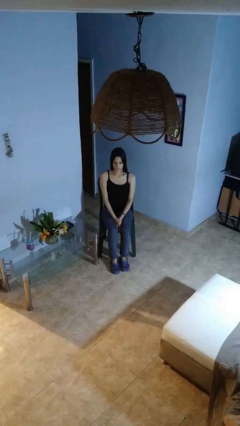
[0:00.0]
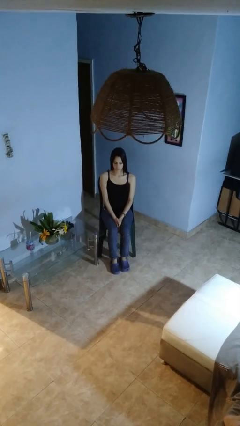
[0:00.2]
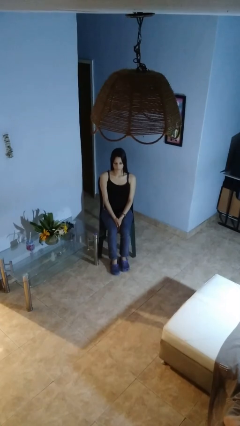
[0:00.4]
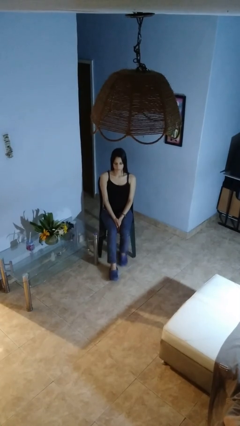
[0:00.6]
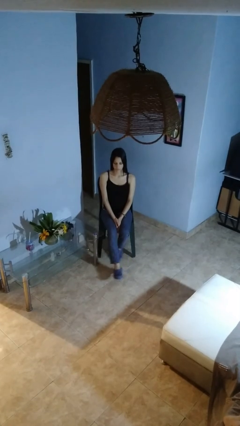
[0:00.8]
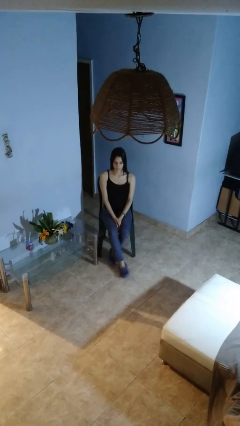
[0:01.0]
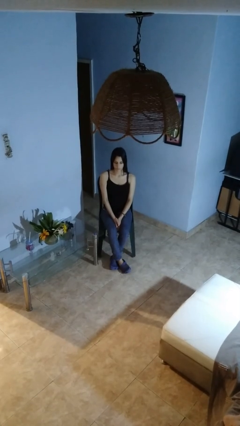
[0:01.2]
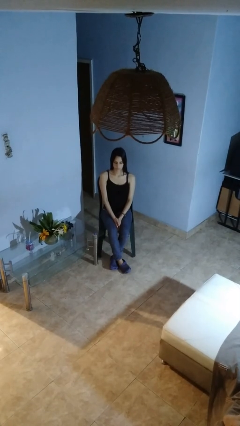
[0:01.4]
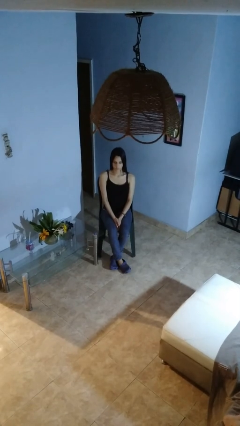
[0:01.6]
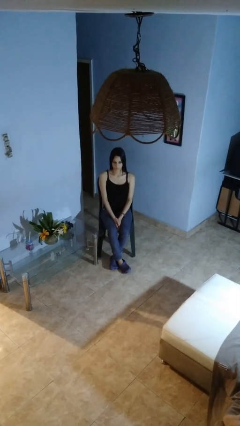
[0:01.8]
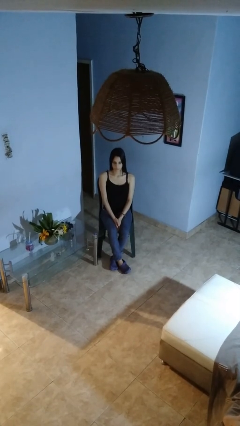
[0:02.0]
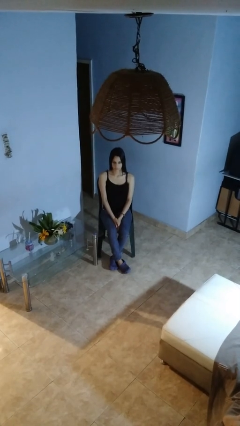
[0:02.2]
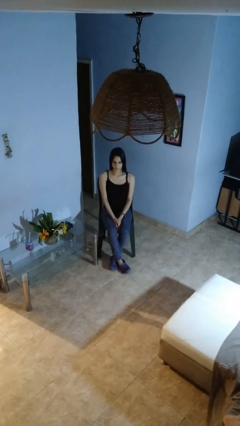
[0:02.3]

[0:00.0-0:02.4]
person crosses legs

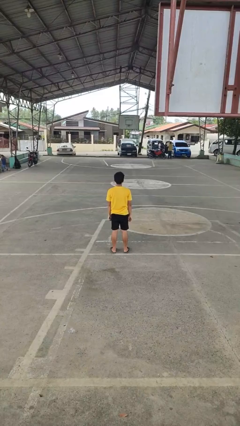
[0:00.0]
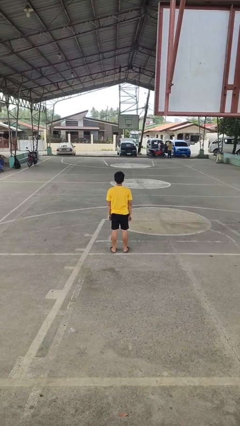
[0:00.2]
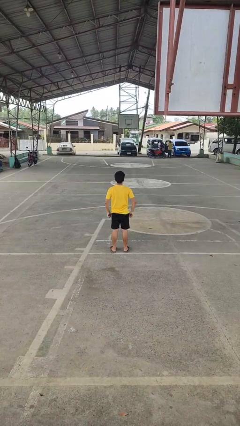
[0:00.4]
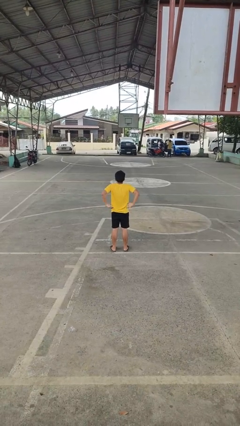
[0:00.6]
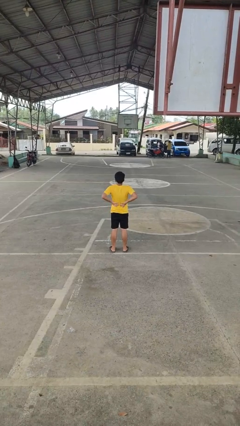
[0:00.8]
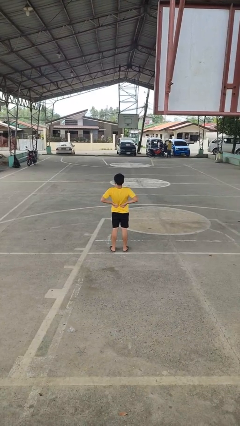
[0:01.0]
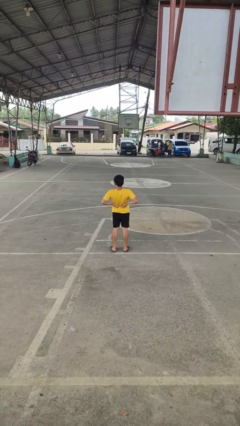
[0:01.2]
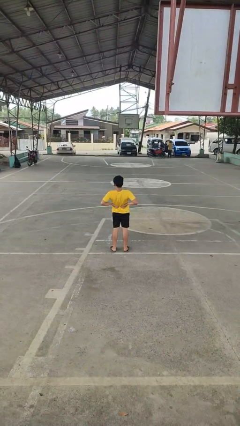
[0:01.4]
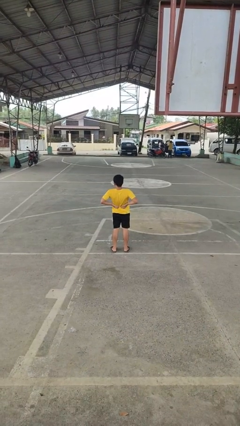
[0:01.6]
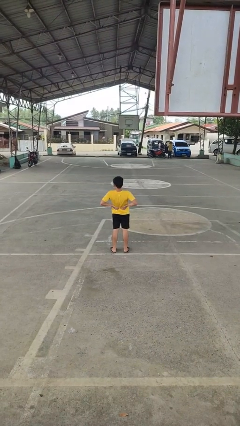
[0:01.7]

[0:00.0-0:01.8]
person stretches back

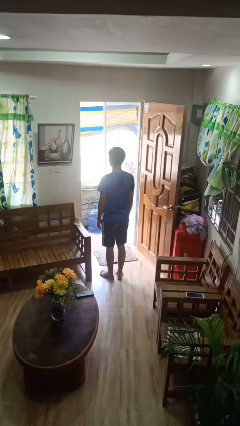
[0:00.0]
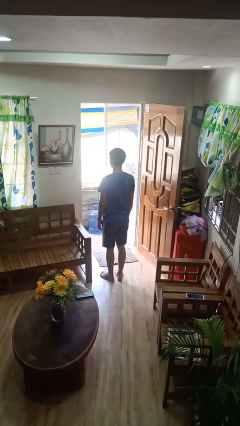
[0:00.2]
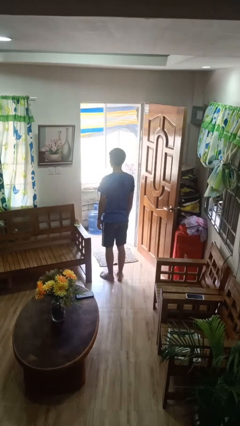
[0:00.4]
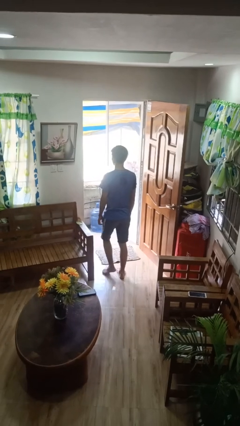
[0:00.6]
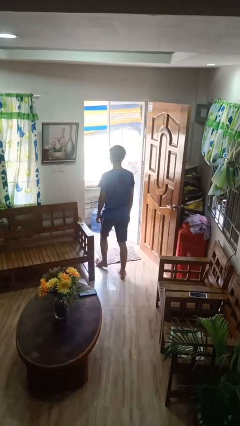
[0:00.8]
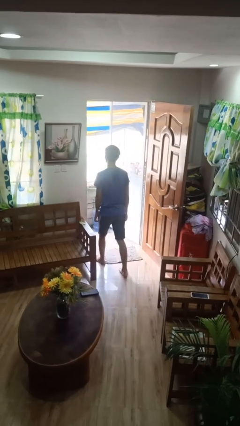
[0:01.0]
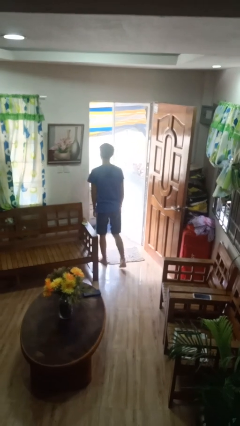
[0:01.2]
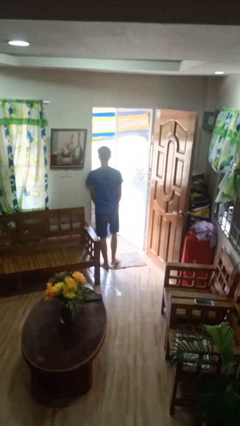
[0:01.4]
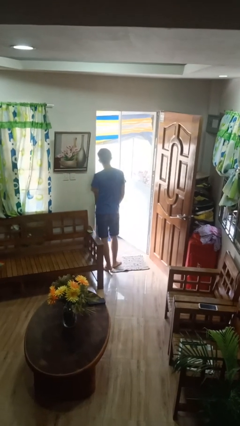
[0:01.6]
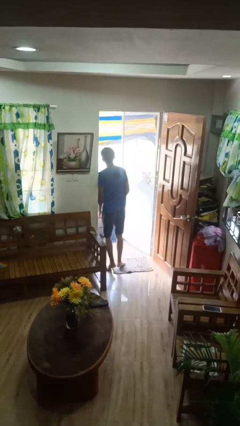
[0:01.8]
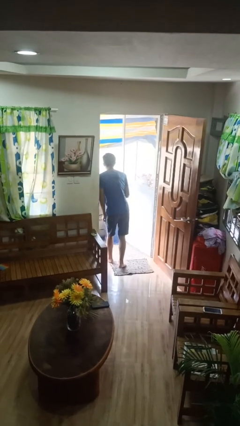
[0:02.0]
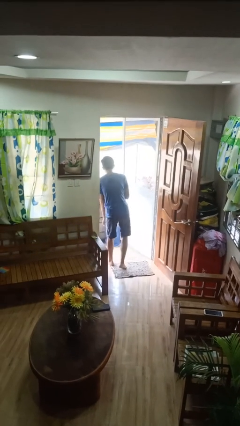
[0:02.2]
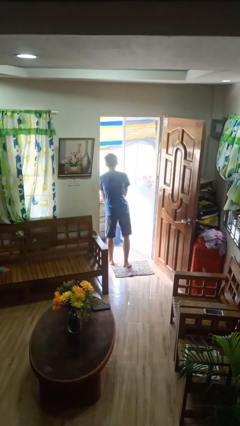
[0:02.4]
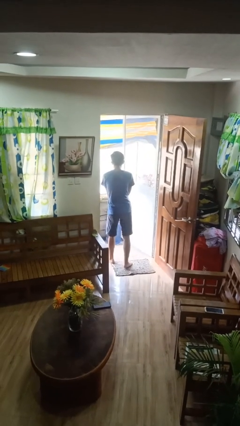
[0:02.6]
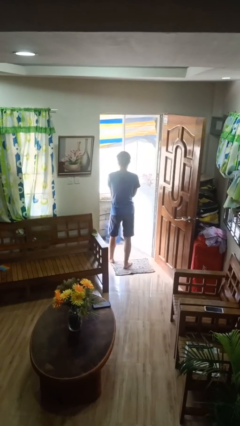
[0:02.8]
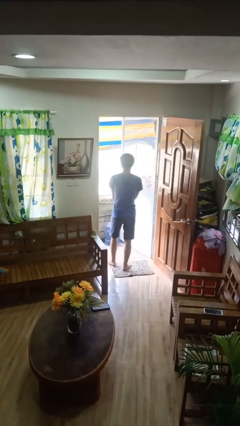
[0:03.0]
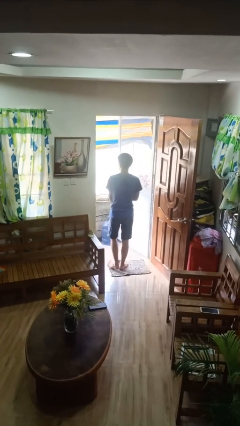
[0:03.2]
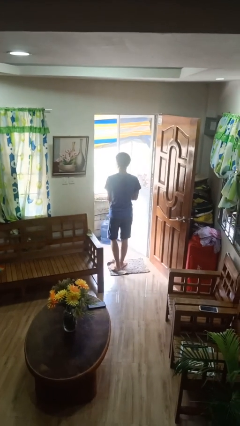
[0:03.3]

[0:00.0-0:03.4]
person bumps into wall

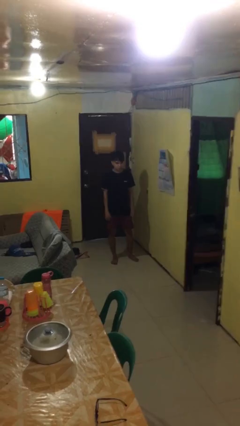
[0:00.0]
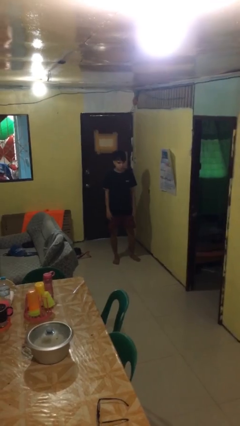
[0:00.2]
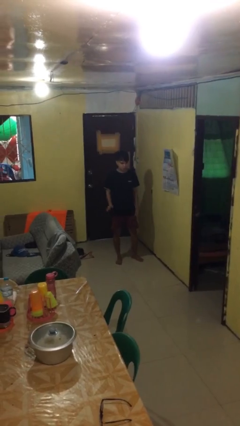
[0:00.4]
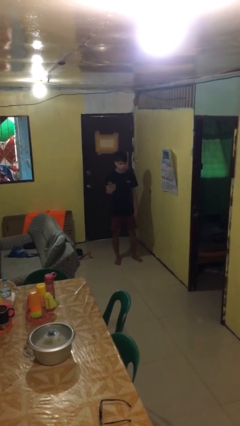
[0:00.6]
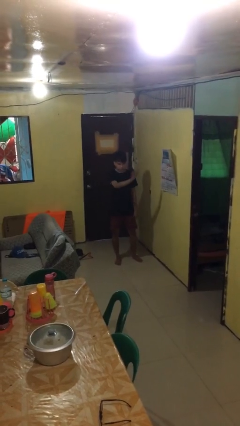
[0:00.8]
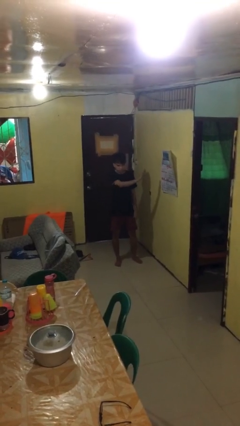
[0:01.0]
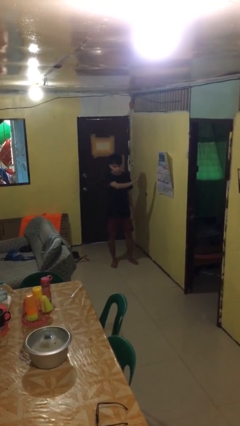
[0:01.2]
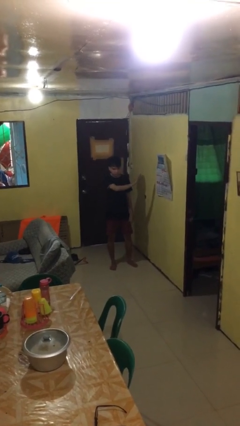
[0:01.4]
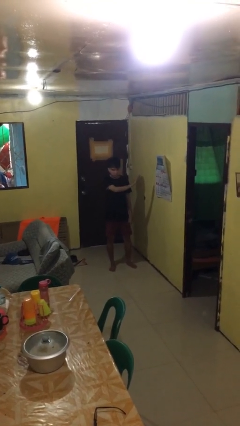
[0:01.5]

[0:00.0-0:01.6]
person gestures swipe left

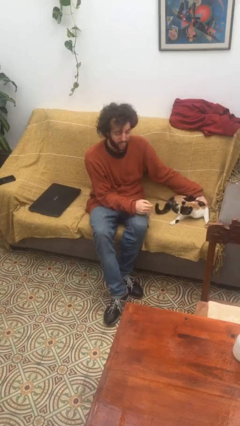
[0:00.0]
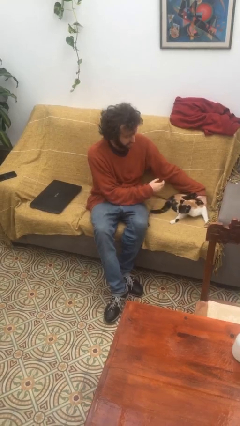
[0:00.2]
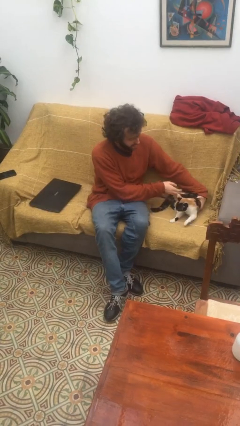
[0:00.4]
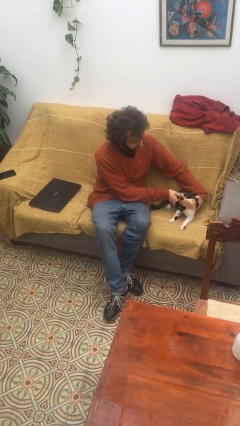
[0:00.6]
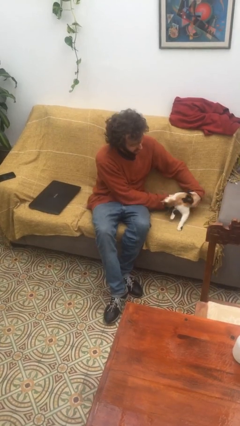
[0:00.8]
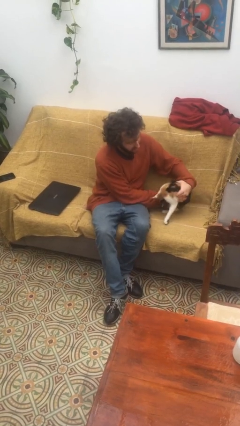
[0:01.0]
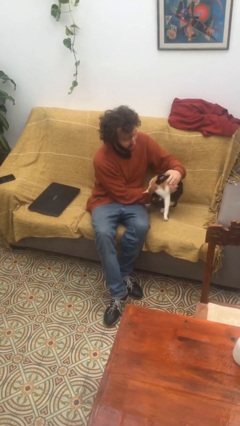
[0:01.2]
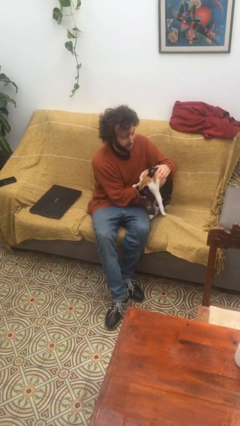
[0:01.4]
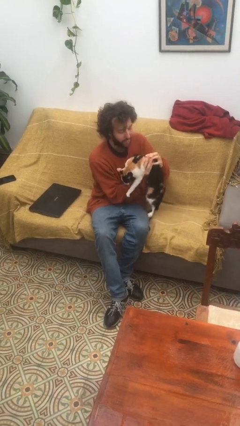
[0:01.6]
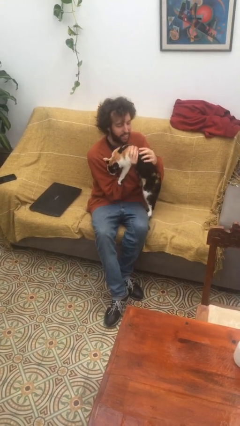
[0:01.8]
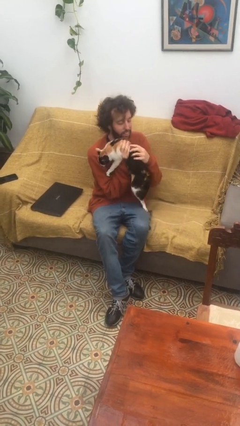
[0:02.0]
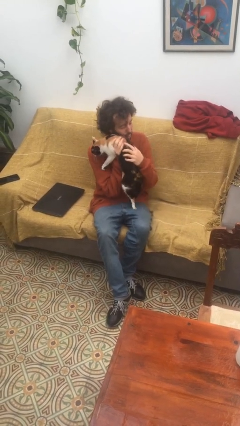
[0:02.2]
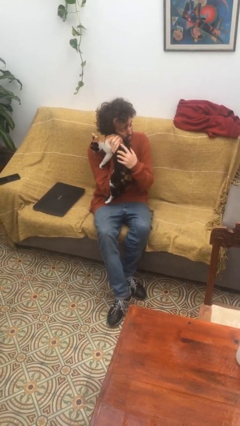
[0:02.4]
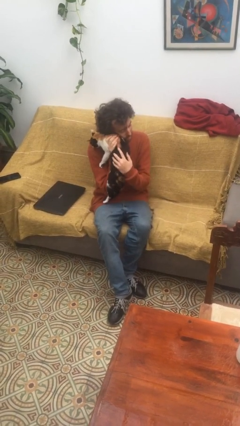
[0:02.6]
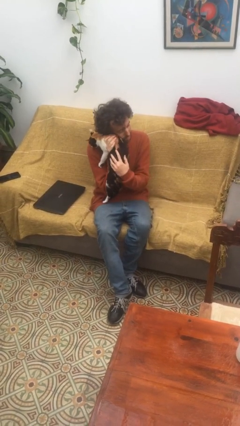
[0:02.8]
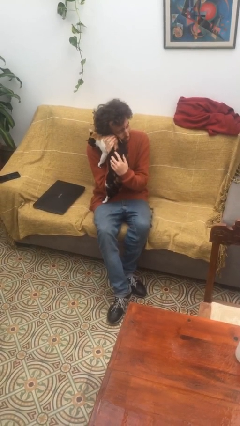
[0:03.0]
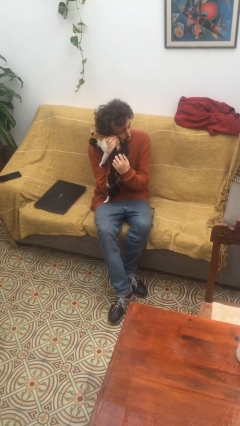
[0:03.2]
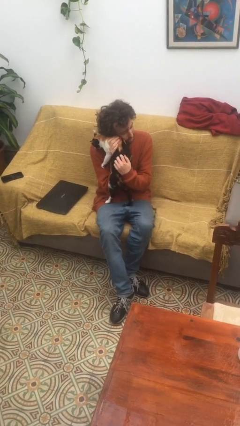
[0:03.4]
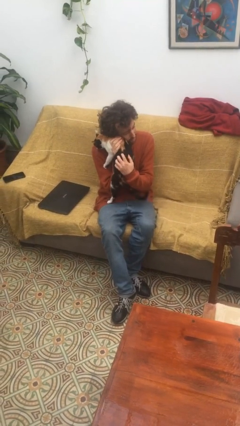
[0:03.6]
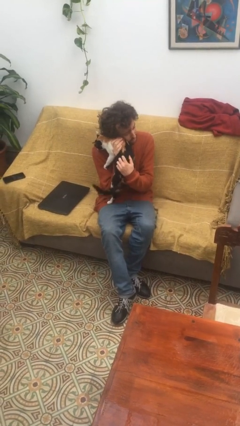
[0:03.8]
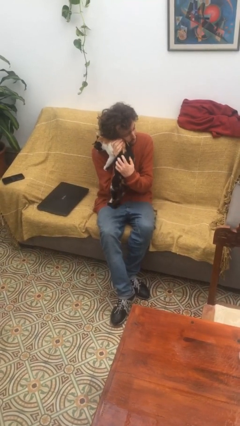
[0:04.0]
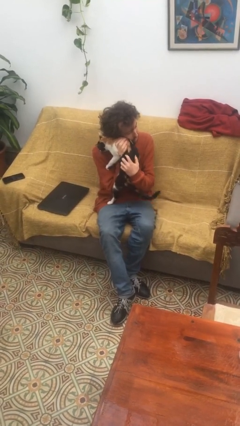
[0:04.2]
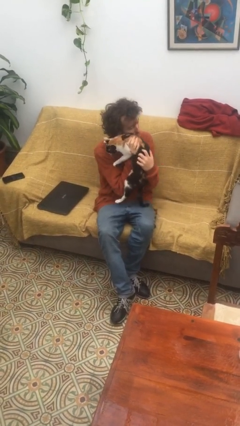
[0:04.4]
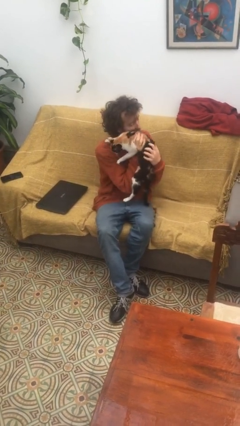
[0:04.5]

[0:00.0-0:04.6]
person hugs cat

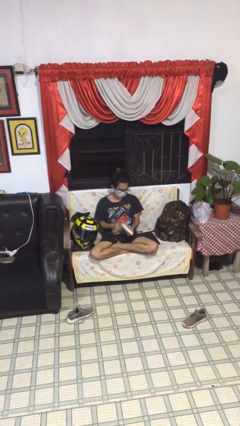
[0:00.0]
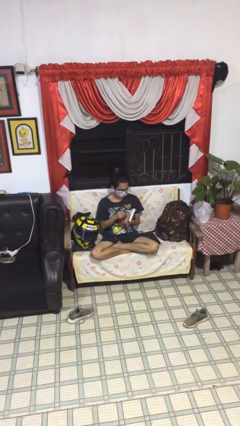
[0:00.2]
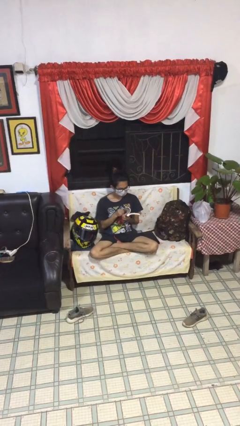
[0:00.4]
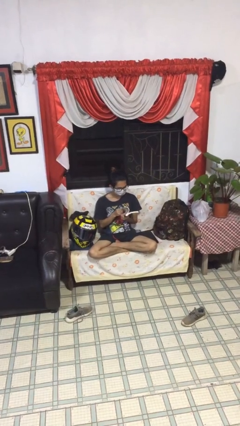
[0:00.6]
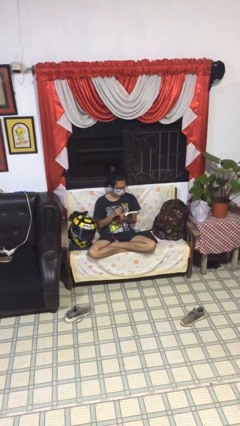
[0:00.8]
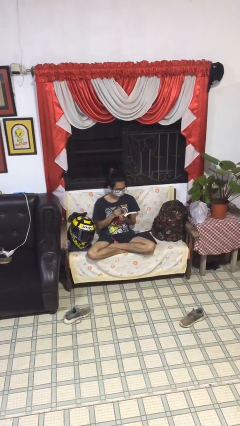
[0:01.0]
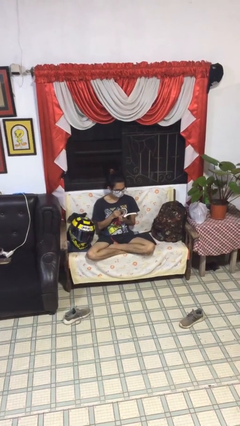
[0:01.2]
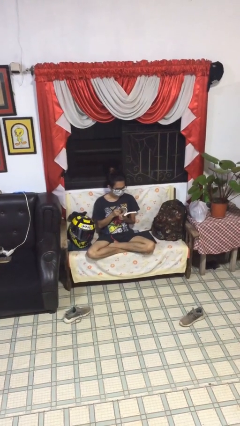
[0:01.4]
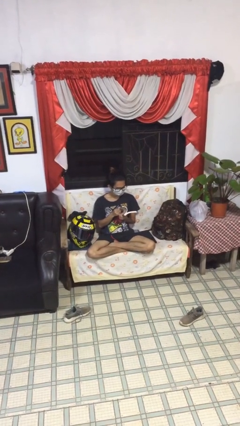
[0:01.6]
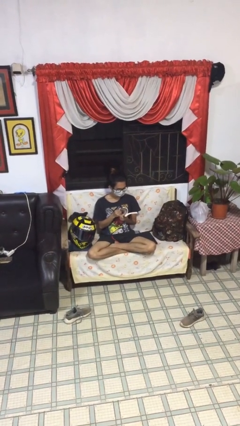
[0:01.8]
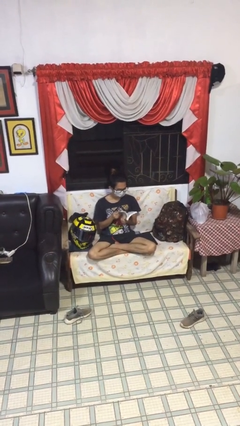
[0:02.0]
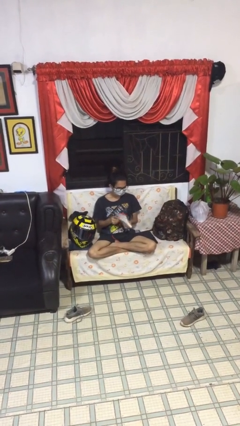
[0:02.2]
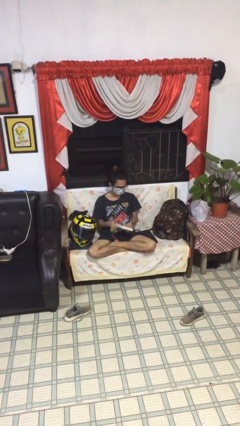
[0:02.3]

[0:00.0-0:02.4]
person reads document

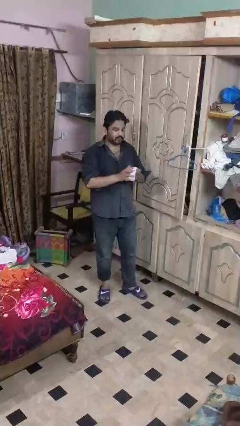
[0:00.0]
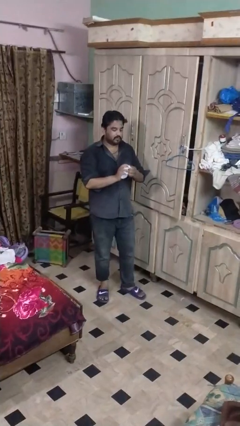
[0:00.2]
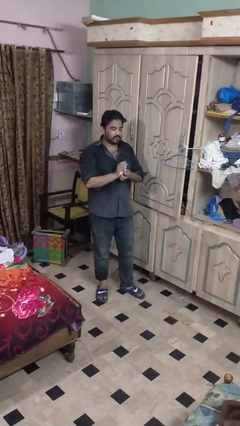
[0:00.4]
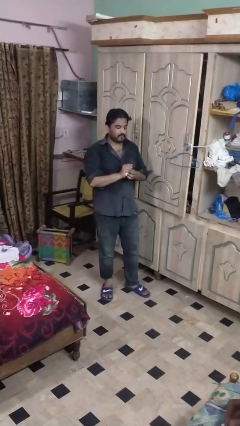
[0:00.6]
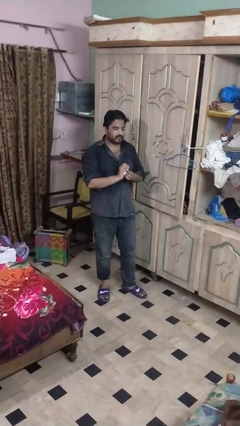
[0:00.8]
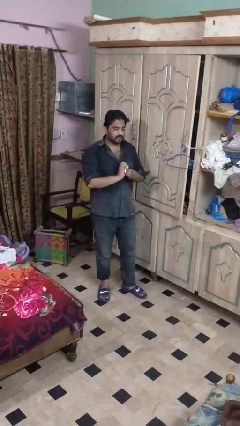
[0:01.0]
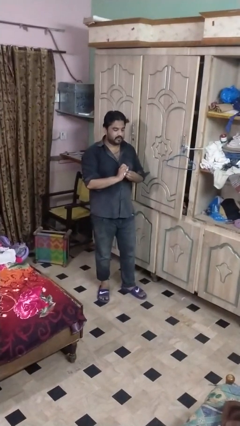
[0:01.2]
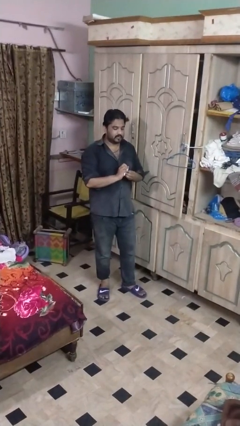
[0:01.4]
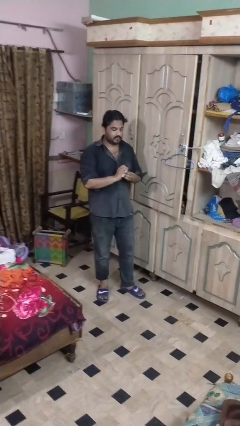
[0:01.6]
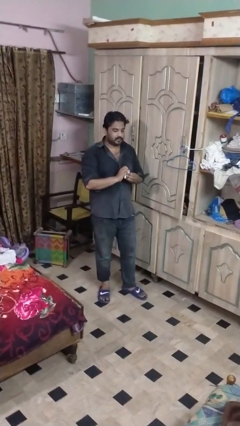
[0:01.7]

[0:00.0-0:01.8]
person crumples paper
